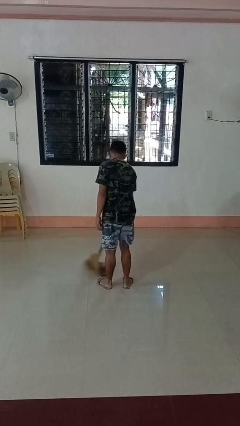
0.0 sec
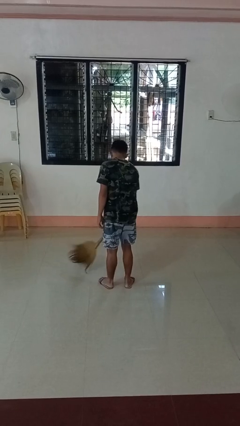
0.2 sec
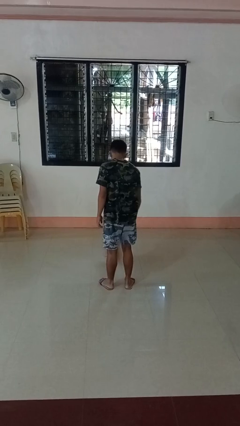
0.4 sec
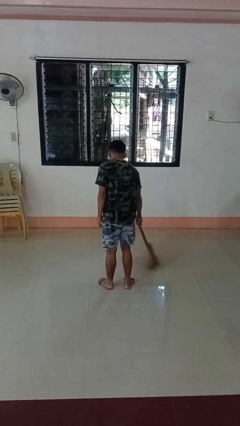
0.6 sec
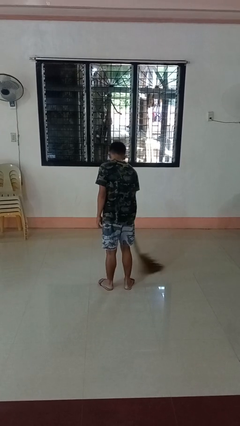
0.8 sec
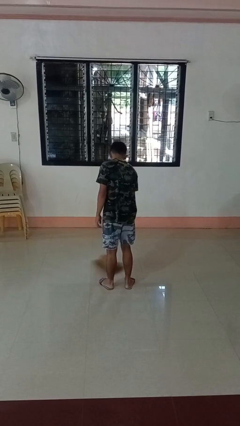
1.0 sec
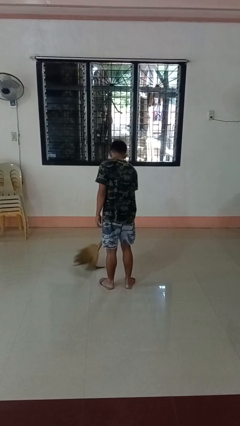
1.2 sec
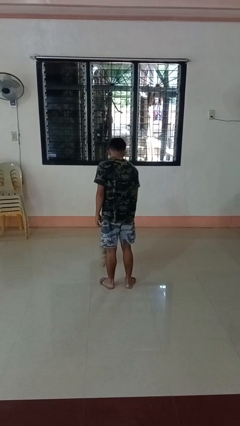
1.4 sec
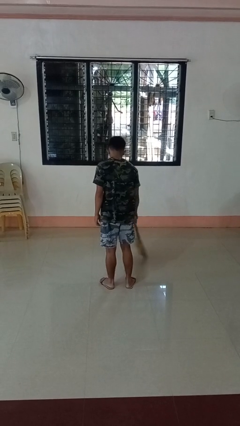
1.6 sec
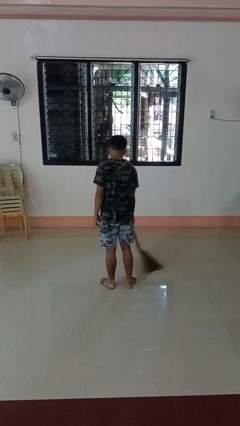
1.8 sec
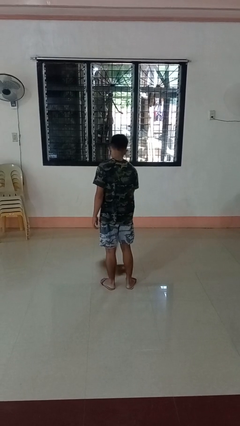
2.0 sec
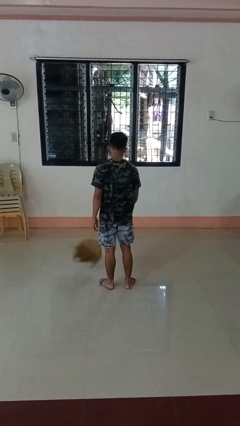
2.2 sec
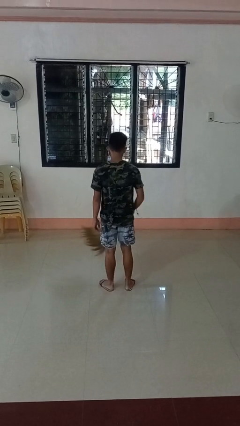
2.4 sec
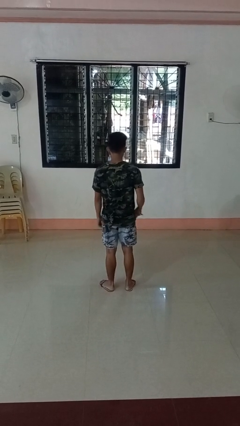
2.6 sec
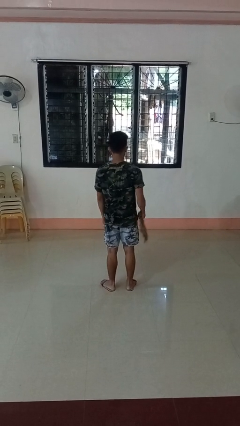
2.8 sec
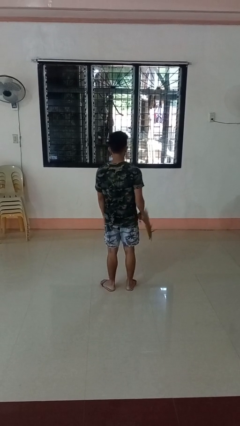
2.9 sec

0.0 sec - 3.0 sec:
person sweeps floor

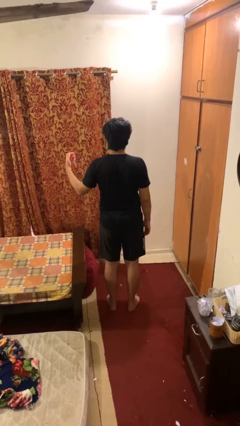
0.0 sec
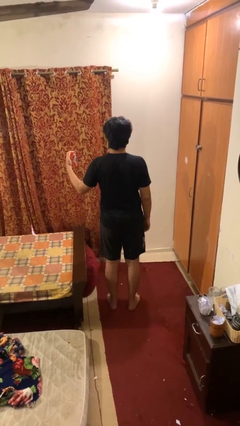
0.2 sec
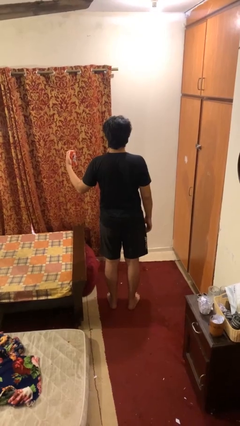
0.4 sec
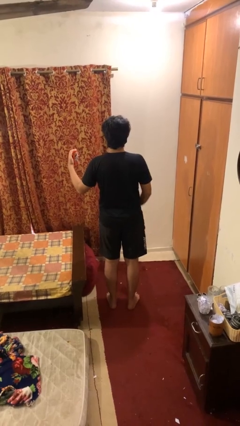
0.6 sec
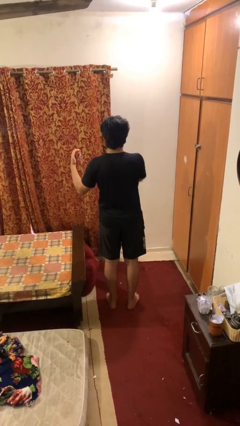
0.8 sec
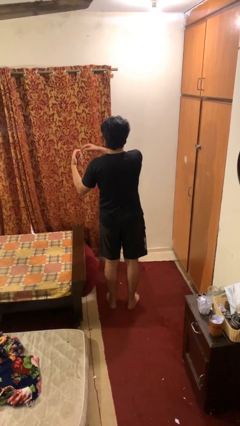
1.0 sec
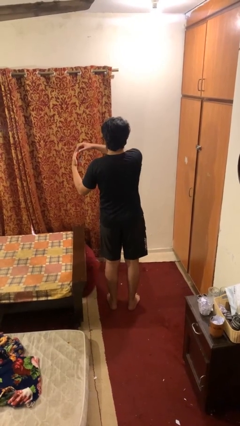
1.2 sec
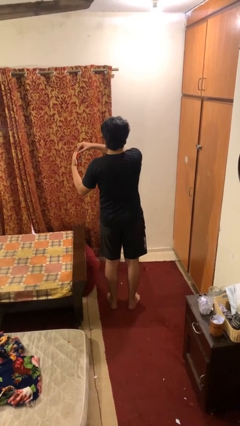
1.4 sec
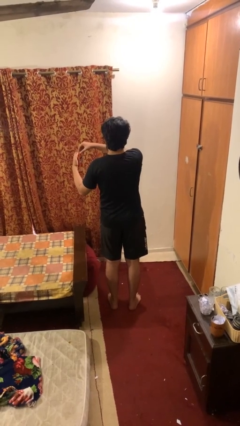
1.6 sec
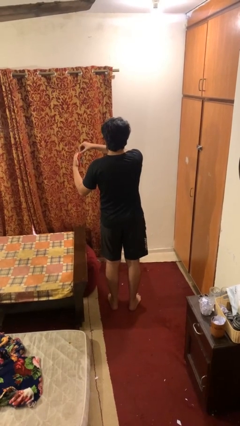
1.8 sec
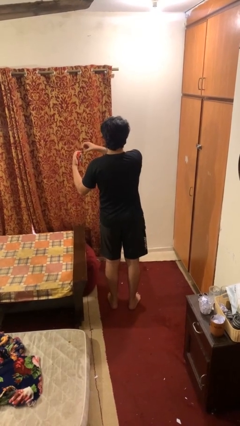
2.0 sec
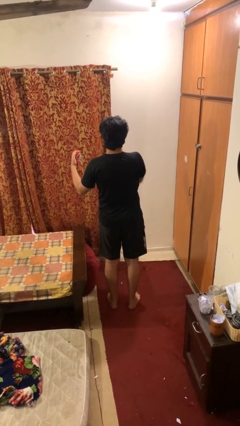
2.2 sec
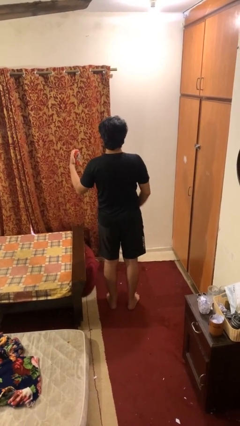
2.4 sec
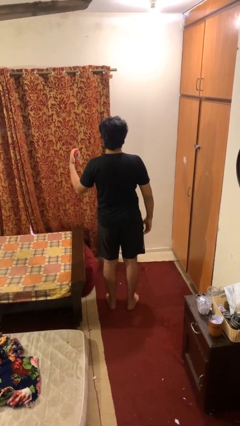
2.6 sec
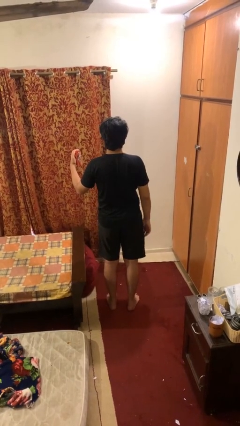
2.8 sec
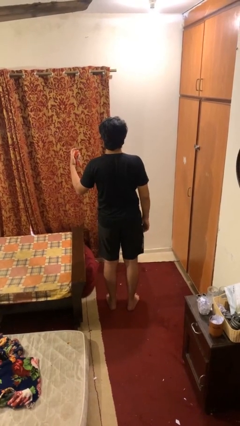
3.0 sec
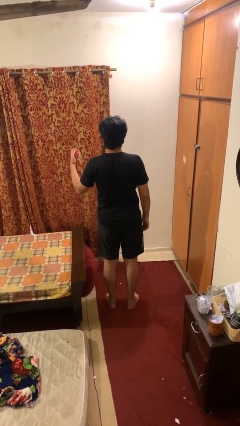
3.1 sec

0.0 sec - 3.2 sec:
person opens beverage can

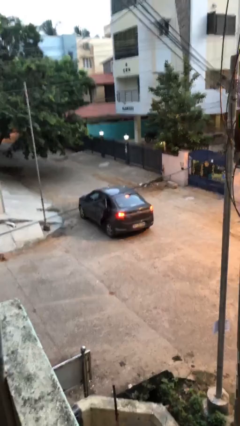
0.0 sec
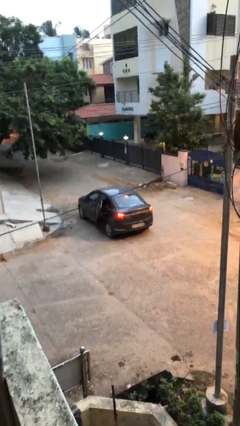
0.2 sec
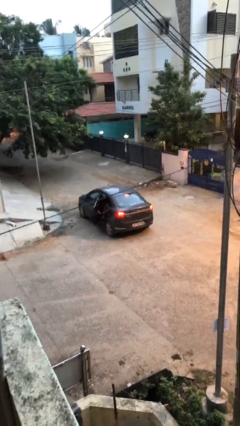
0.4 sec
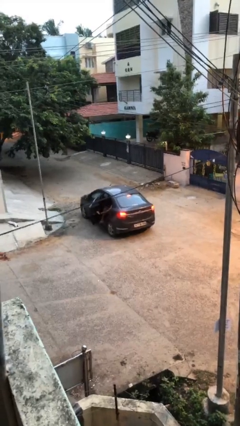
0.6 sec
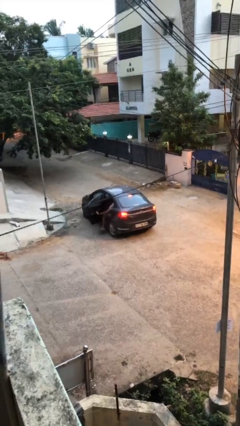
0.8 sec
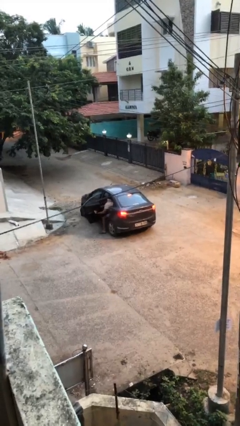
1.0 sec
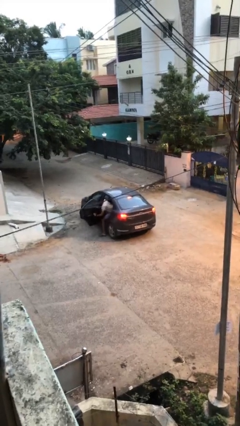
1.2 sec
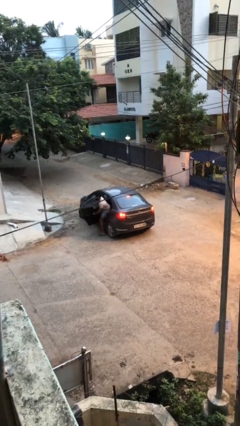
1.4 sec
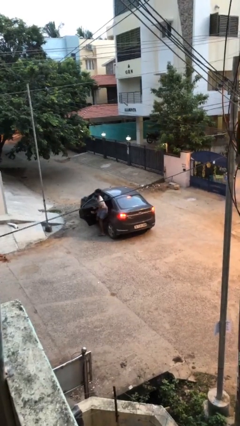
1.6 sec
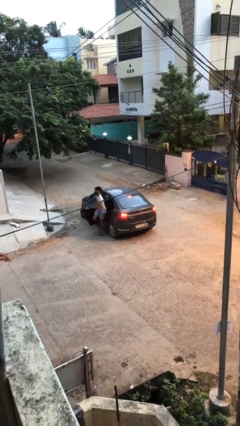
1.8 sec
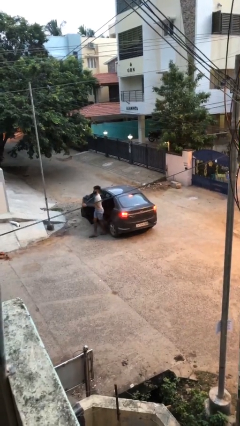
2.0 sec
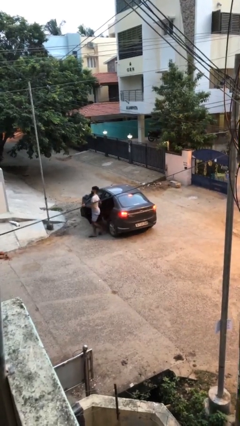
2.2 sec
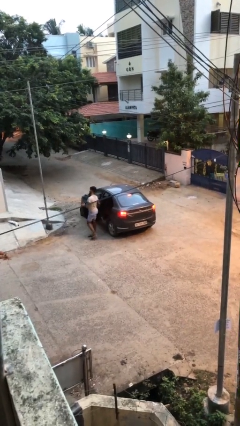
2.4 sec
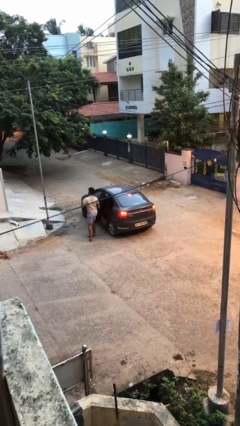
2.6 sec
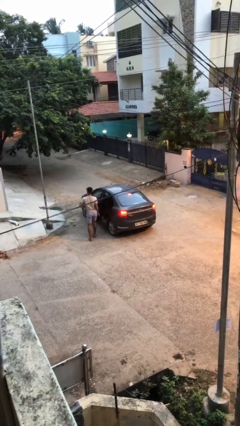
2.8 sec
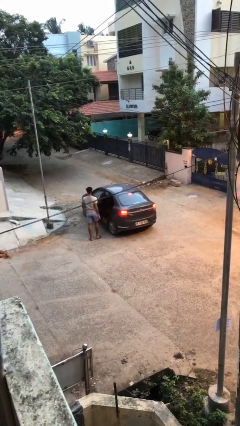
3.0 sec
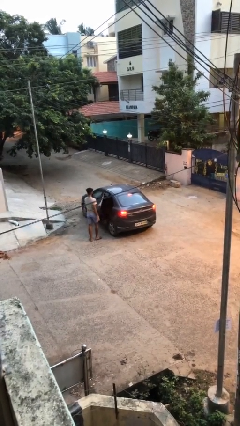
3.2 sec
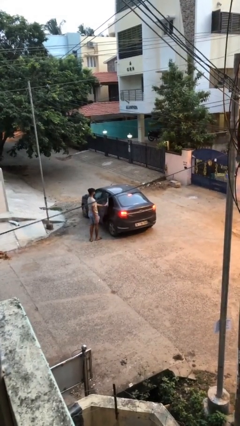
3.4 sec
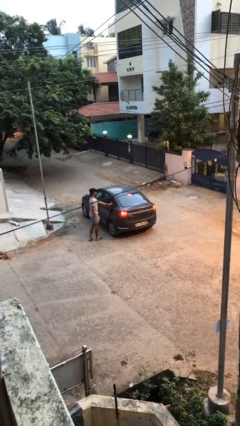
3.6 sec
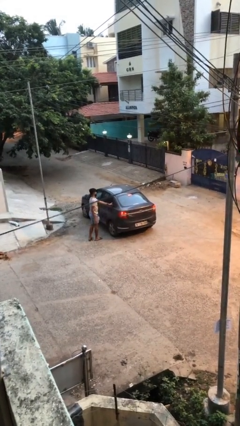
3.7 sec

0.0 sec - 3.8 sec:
car drops off person

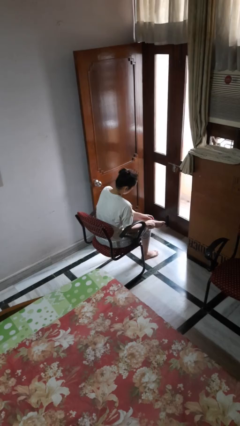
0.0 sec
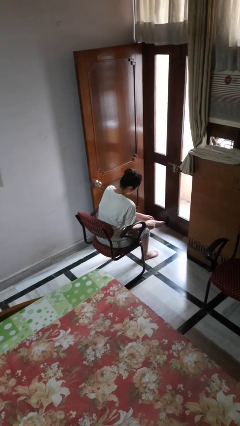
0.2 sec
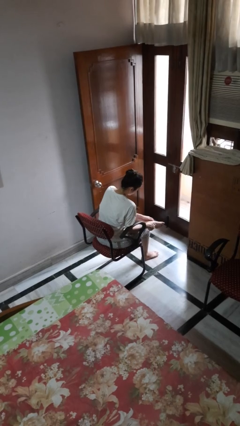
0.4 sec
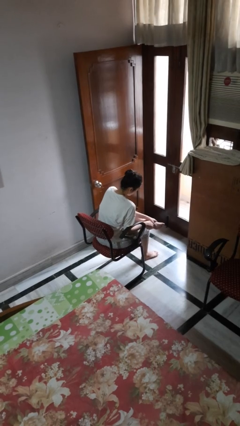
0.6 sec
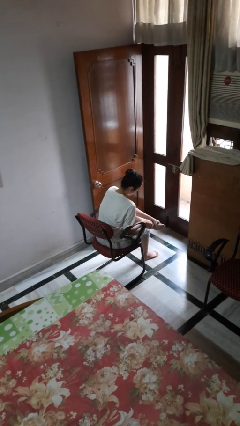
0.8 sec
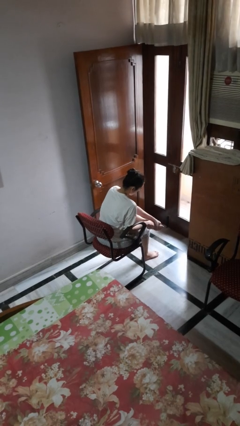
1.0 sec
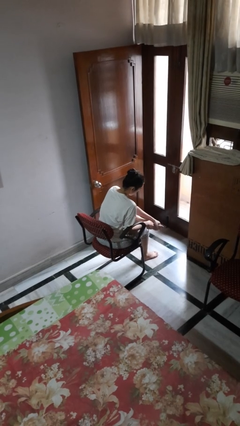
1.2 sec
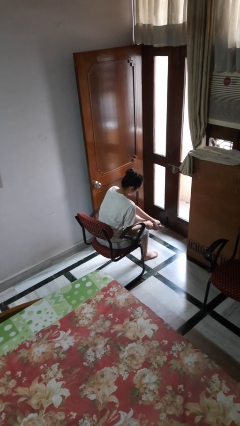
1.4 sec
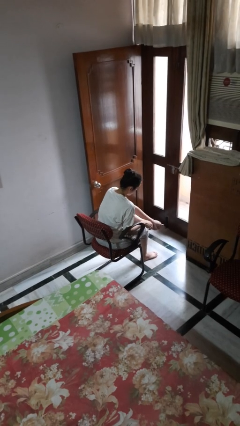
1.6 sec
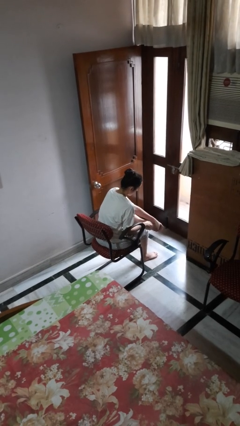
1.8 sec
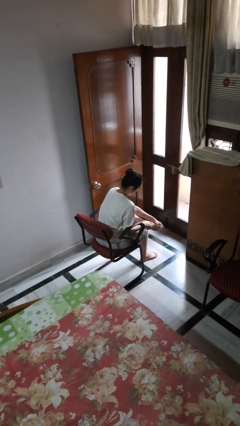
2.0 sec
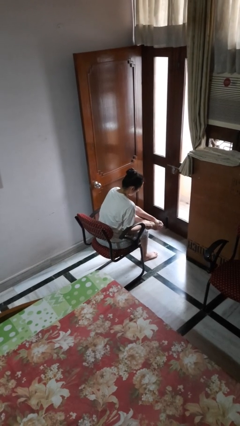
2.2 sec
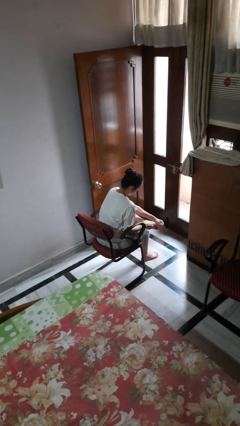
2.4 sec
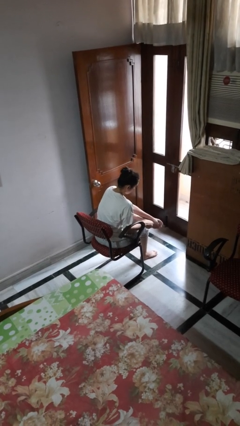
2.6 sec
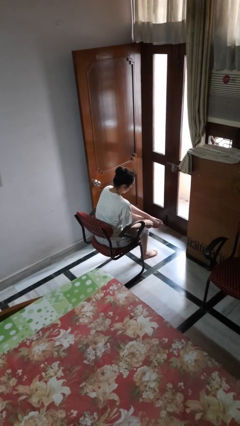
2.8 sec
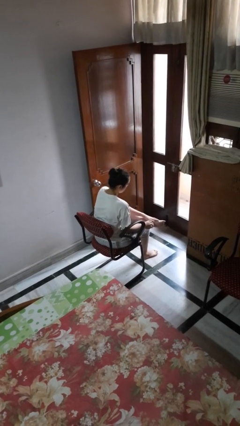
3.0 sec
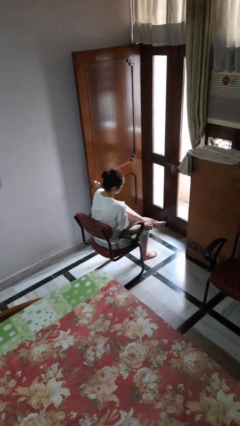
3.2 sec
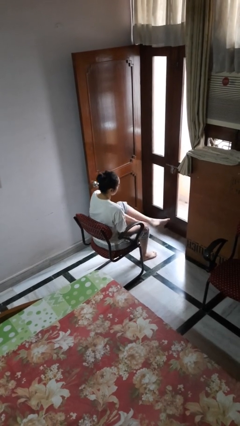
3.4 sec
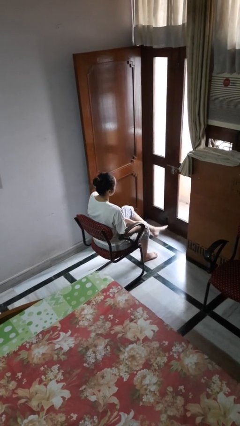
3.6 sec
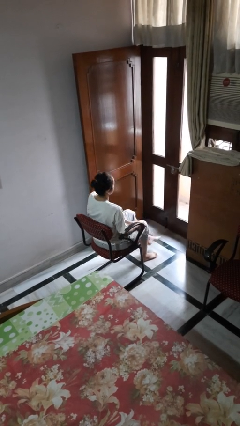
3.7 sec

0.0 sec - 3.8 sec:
person rubs foot

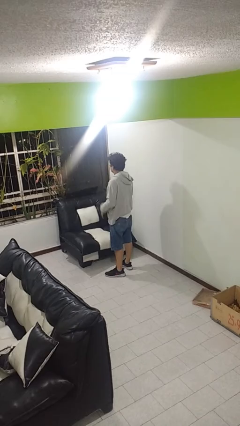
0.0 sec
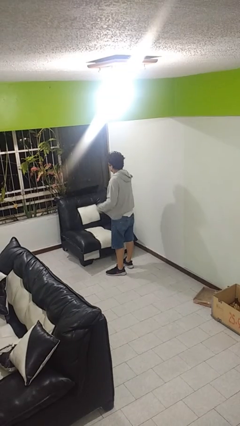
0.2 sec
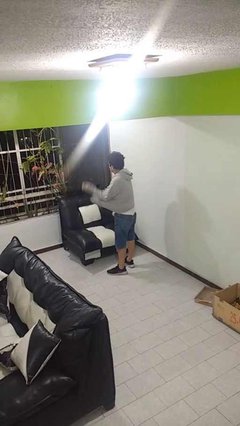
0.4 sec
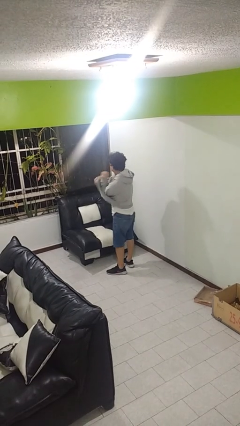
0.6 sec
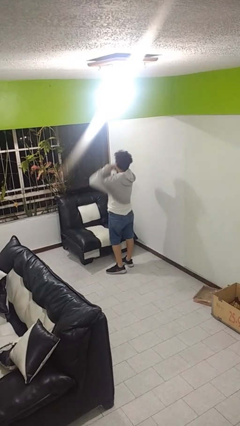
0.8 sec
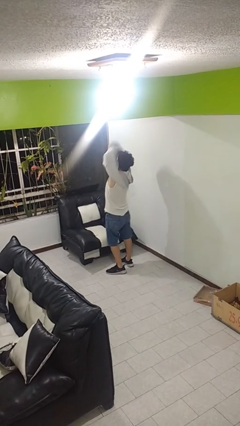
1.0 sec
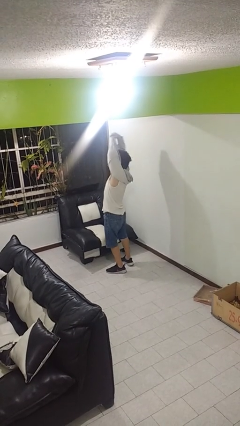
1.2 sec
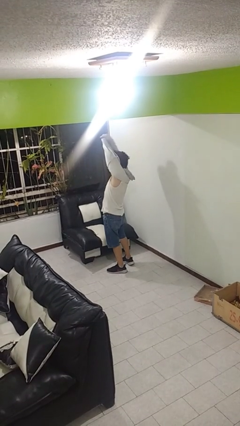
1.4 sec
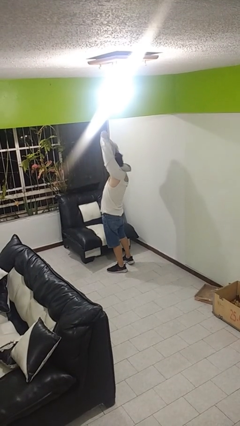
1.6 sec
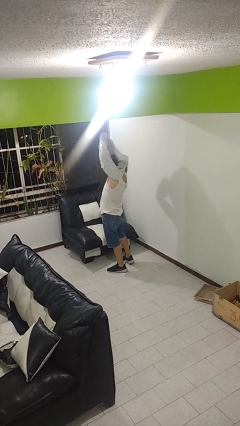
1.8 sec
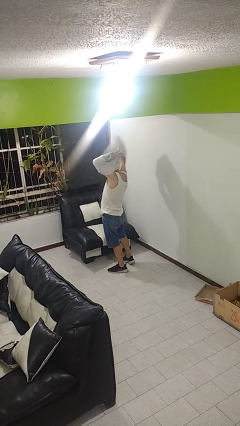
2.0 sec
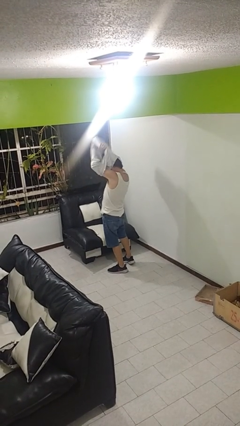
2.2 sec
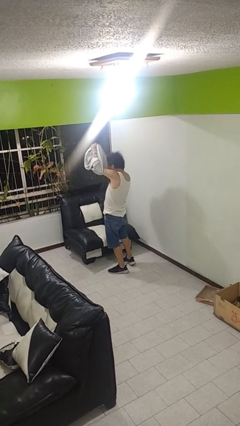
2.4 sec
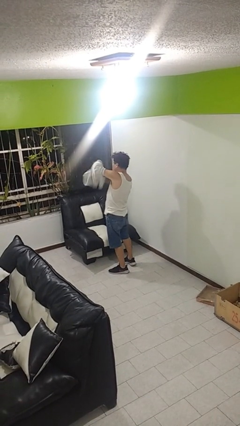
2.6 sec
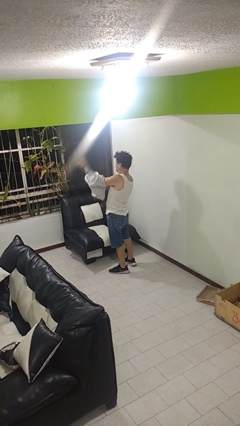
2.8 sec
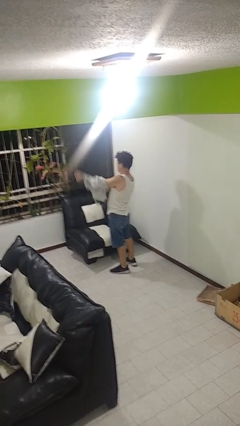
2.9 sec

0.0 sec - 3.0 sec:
person takes off hoodie

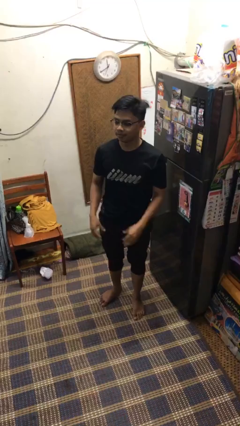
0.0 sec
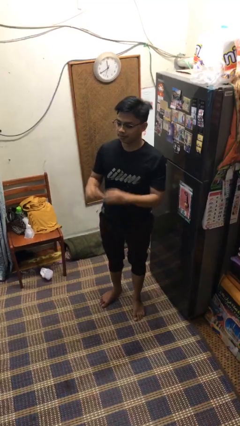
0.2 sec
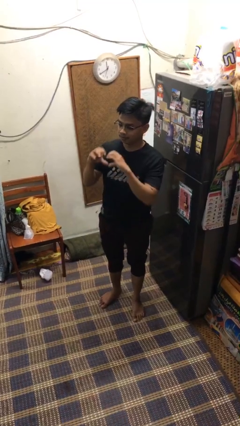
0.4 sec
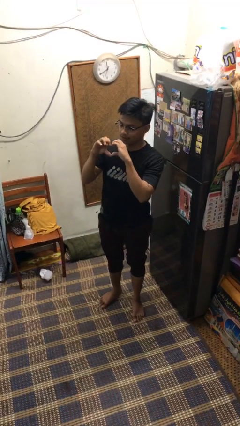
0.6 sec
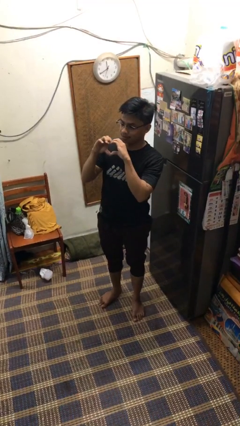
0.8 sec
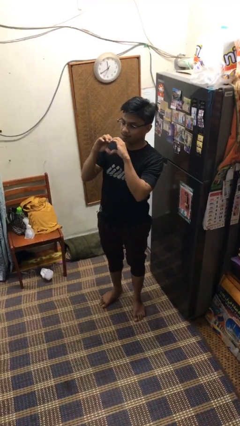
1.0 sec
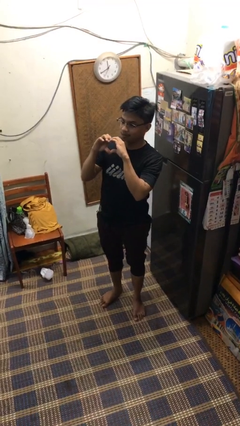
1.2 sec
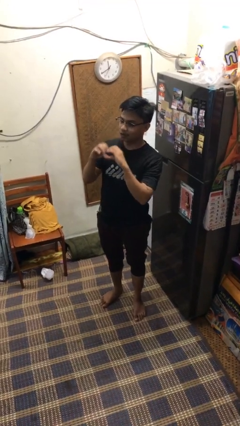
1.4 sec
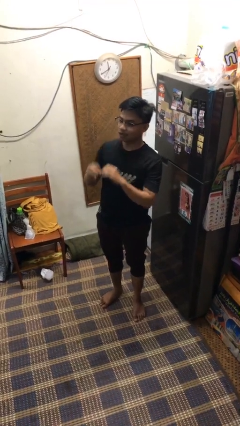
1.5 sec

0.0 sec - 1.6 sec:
person gestures heart
